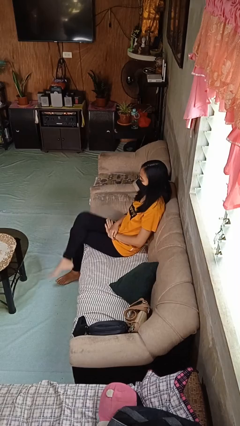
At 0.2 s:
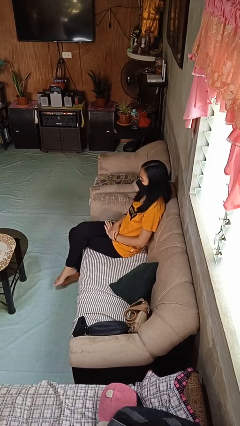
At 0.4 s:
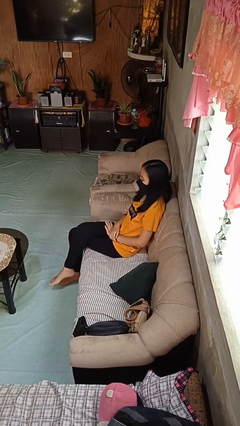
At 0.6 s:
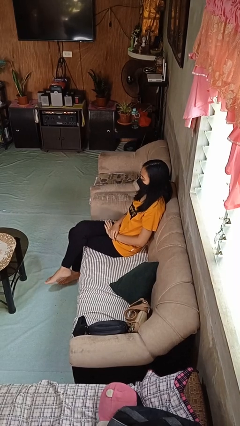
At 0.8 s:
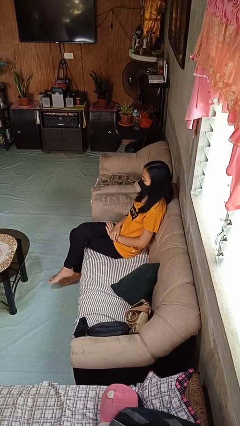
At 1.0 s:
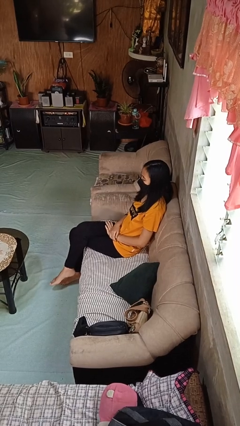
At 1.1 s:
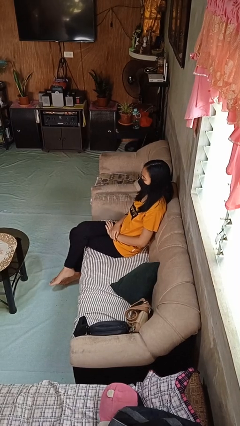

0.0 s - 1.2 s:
person crosses legs

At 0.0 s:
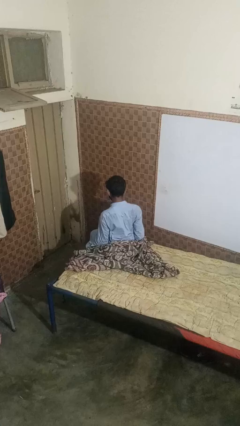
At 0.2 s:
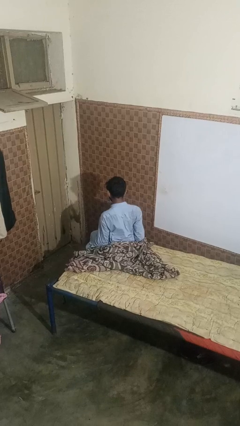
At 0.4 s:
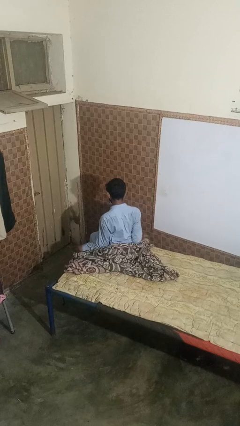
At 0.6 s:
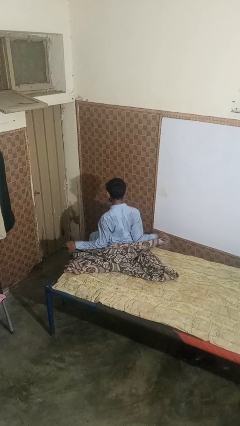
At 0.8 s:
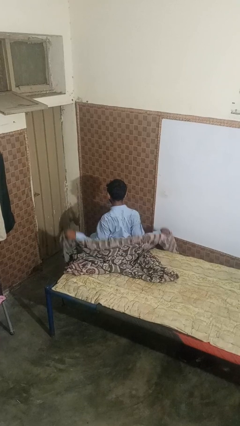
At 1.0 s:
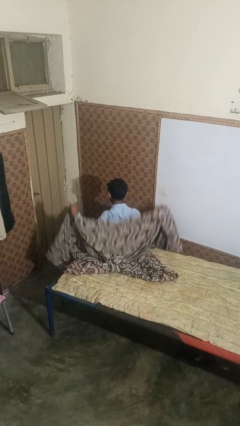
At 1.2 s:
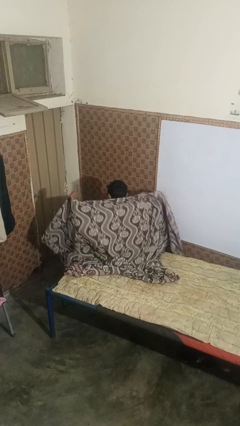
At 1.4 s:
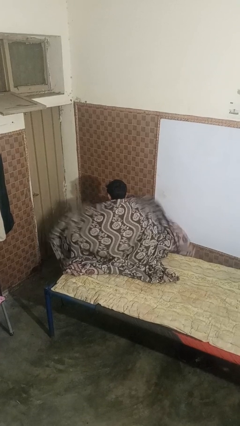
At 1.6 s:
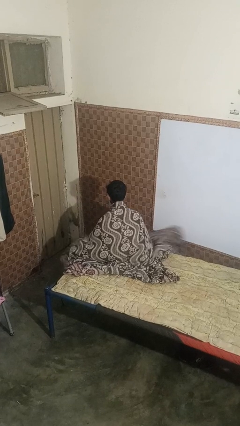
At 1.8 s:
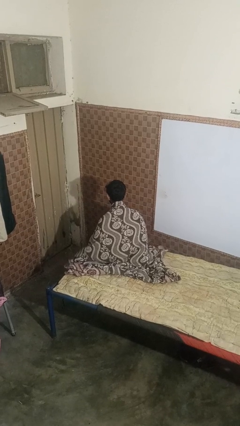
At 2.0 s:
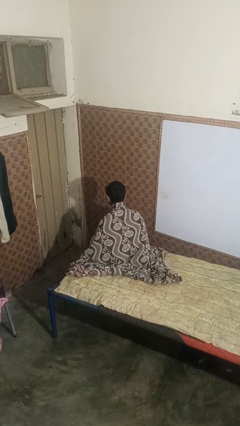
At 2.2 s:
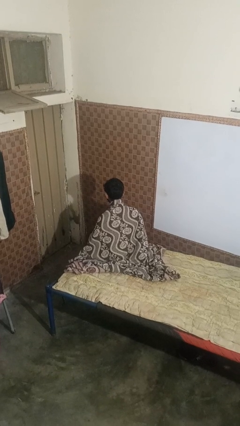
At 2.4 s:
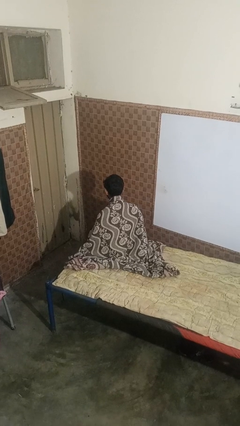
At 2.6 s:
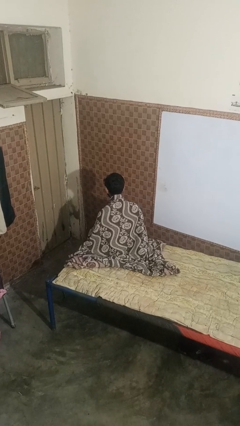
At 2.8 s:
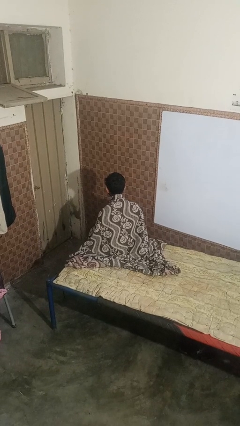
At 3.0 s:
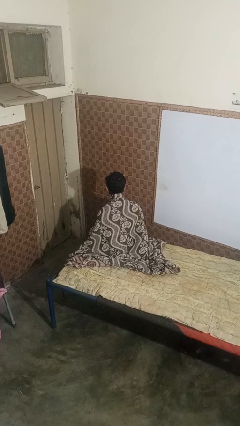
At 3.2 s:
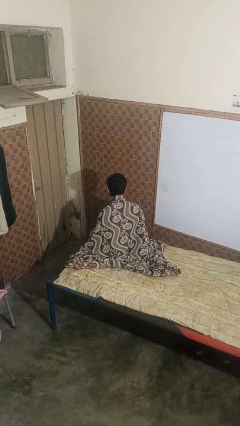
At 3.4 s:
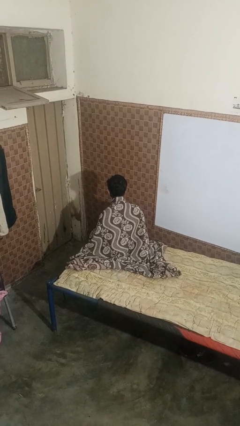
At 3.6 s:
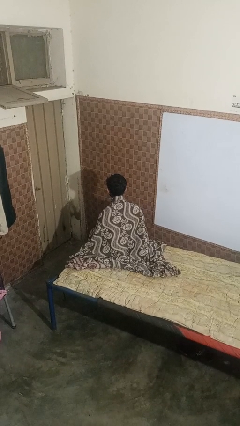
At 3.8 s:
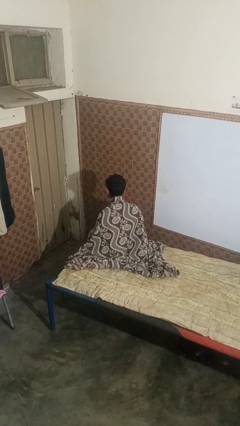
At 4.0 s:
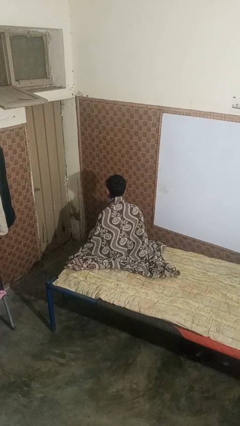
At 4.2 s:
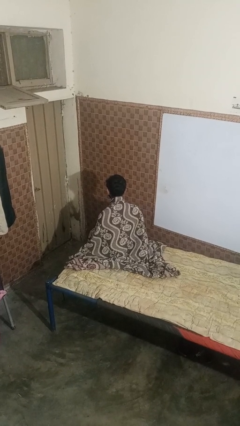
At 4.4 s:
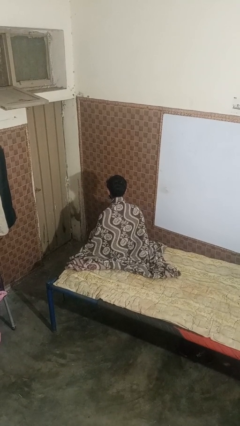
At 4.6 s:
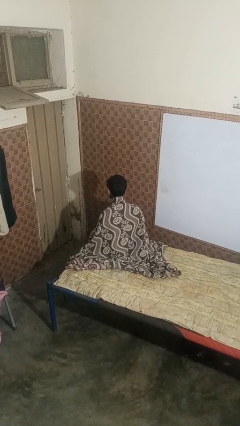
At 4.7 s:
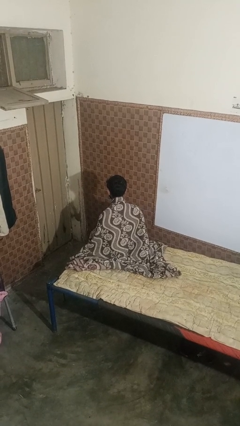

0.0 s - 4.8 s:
person covers with bedsheets

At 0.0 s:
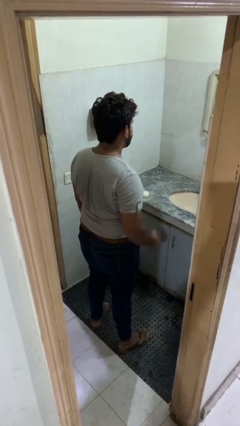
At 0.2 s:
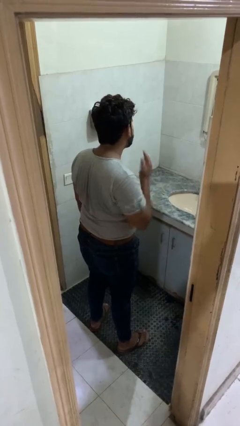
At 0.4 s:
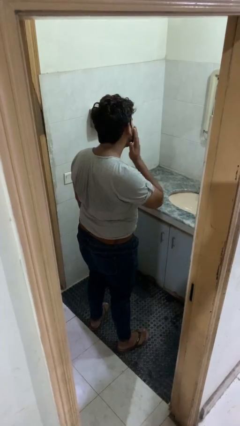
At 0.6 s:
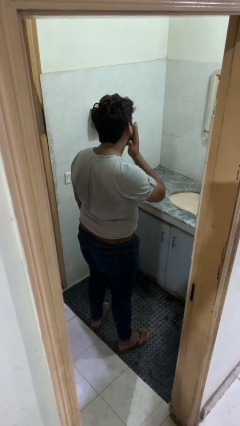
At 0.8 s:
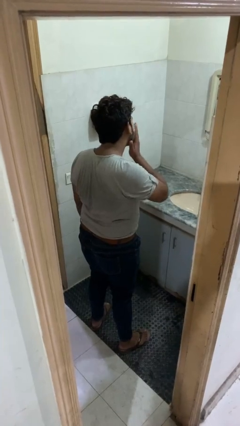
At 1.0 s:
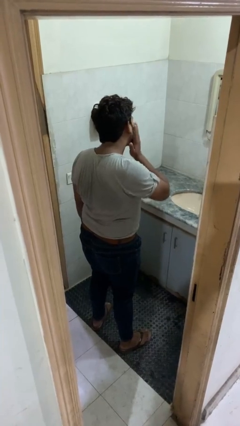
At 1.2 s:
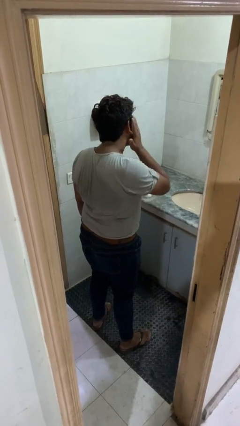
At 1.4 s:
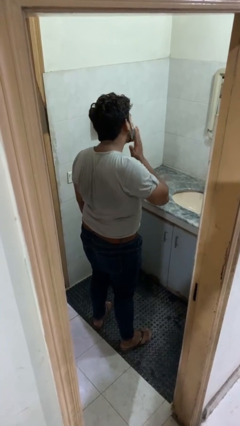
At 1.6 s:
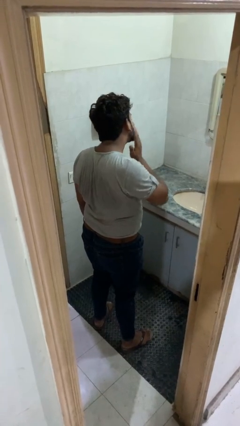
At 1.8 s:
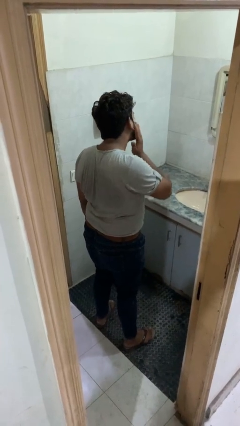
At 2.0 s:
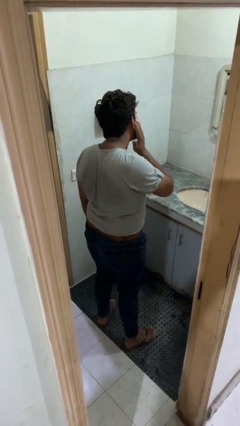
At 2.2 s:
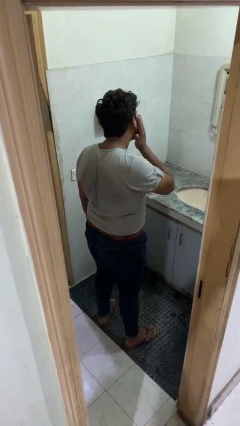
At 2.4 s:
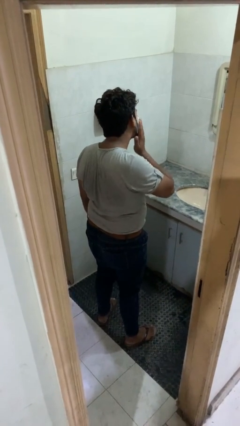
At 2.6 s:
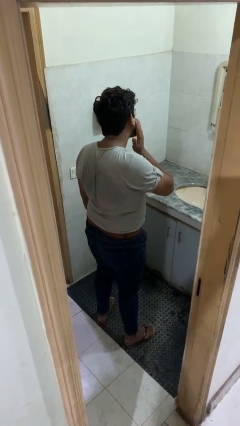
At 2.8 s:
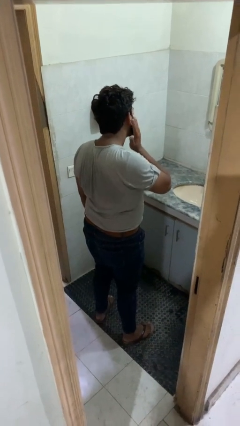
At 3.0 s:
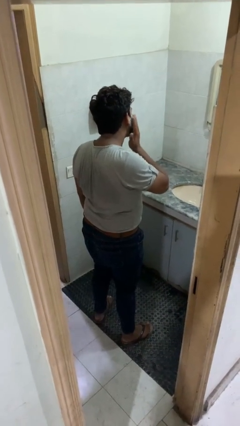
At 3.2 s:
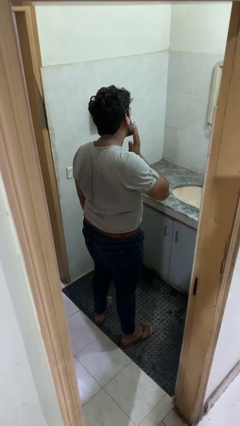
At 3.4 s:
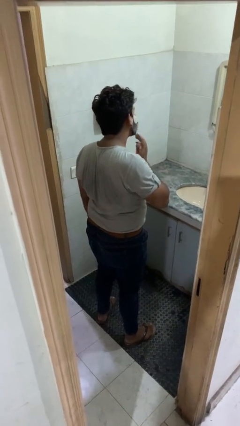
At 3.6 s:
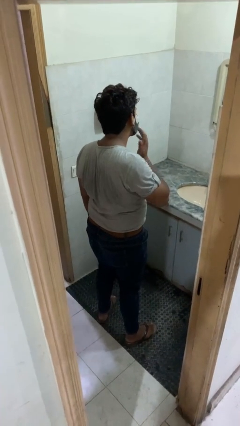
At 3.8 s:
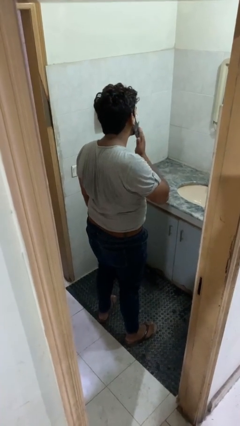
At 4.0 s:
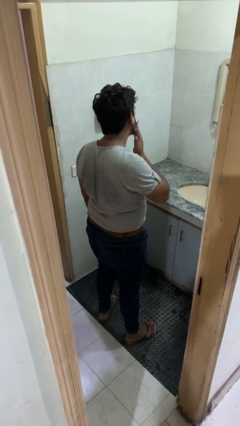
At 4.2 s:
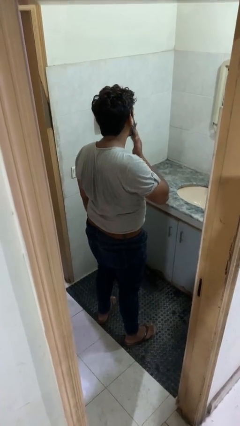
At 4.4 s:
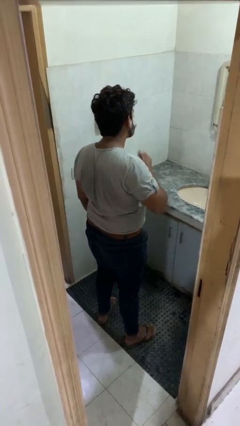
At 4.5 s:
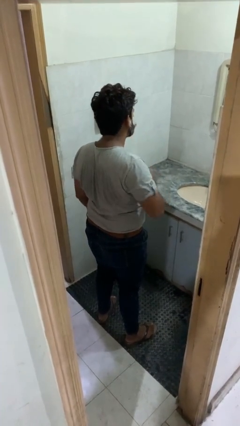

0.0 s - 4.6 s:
person applies shaving cream

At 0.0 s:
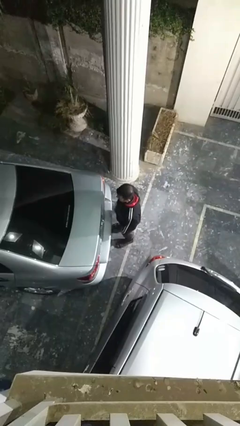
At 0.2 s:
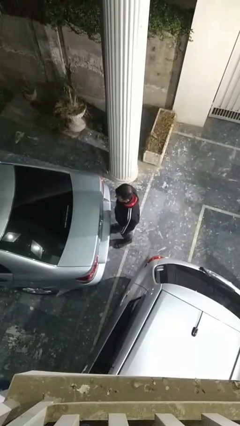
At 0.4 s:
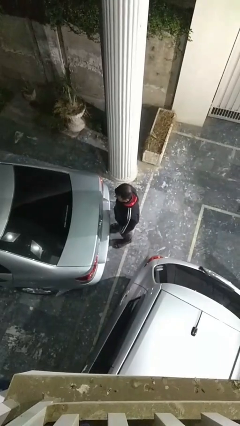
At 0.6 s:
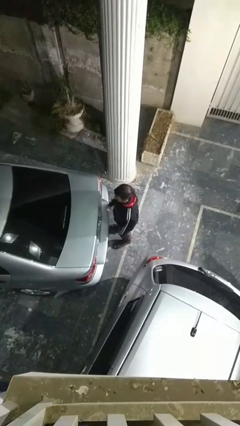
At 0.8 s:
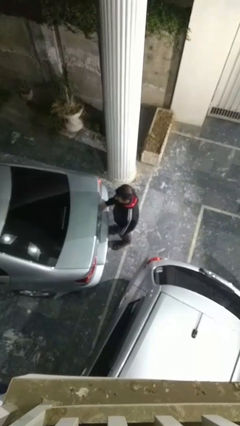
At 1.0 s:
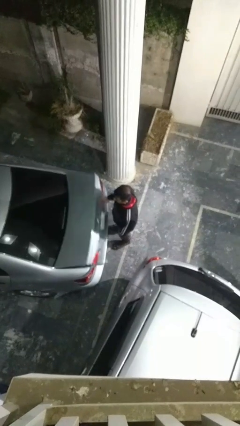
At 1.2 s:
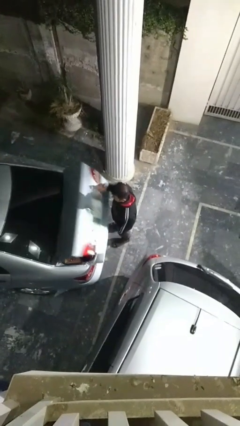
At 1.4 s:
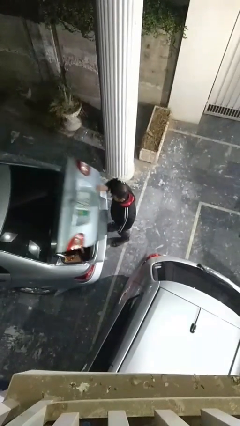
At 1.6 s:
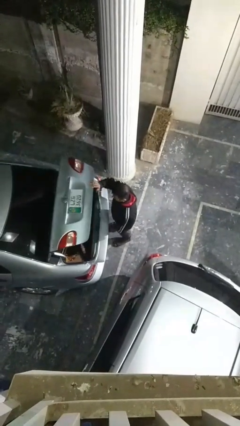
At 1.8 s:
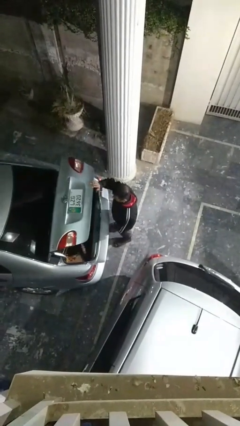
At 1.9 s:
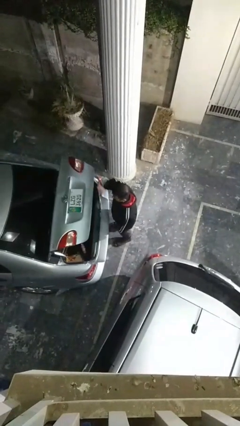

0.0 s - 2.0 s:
person opens car trunk

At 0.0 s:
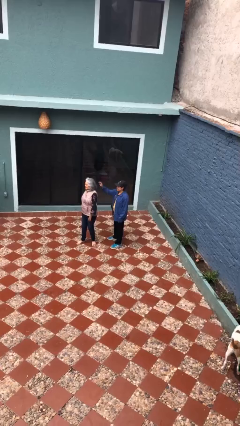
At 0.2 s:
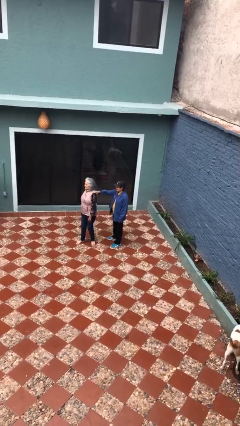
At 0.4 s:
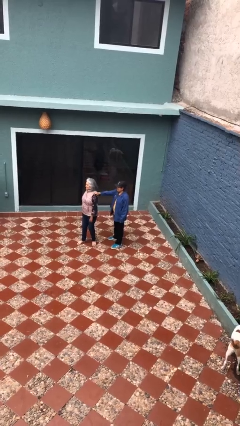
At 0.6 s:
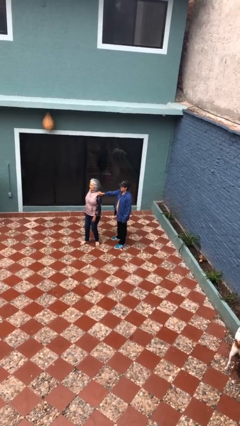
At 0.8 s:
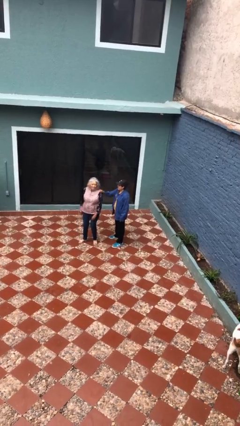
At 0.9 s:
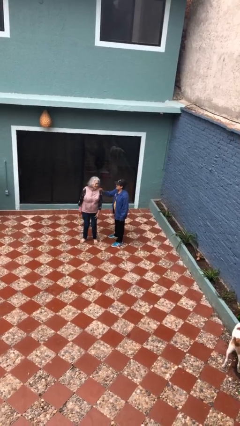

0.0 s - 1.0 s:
person grabs person by shoulder

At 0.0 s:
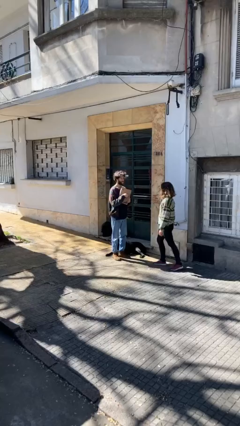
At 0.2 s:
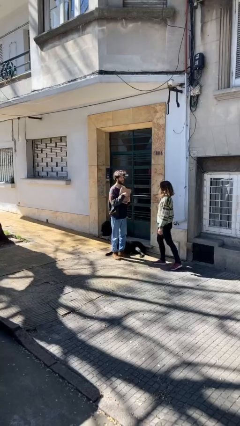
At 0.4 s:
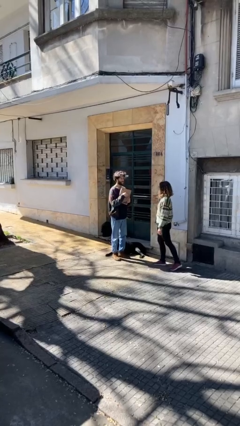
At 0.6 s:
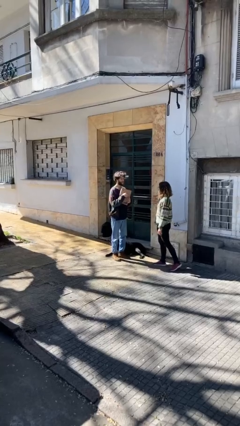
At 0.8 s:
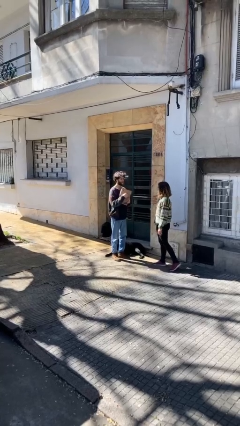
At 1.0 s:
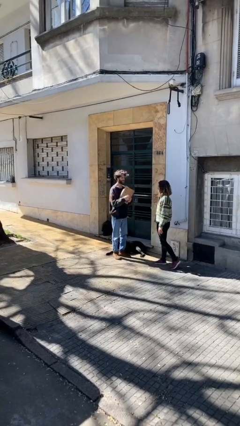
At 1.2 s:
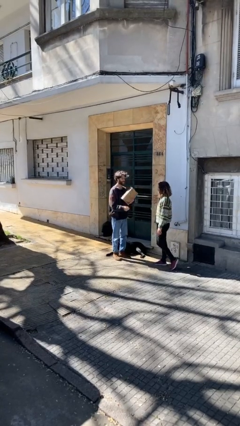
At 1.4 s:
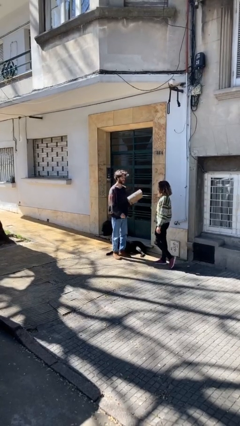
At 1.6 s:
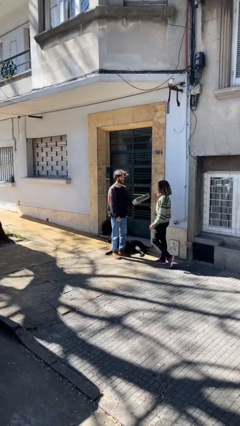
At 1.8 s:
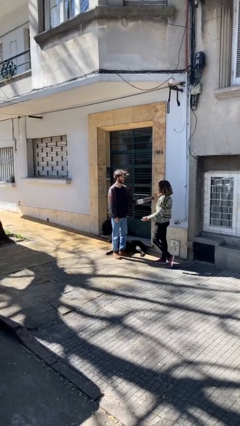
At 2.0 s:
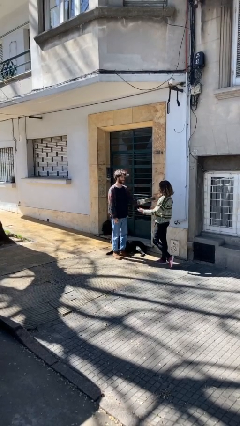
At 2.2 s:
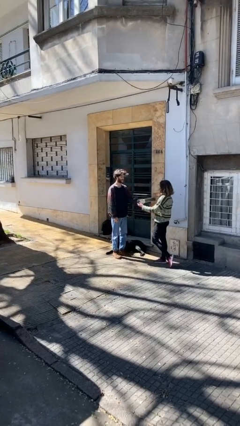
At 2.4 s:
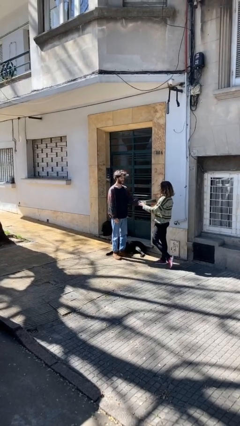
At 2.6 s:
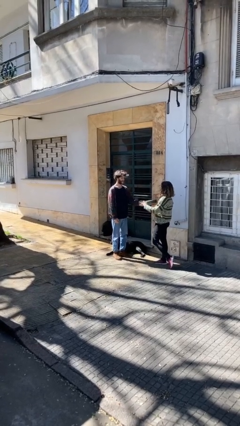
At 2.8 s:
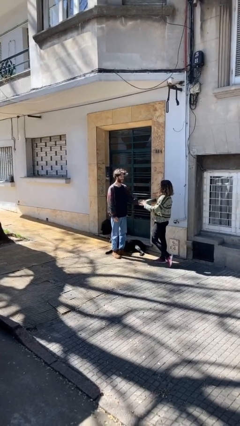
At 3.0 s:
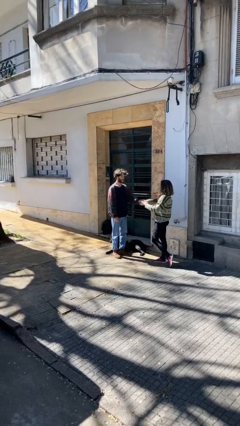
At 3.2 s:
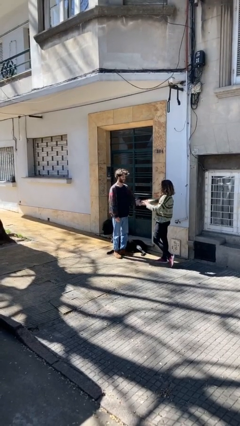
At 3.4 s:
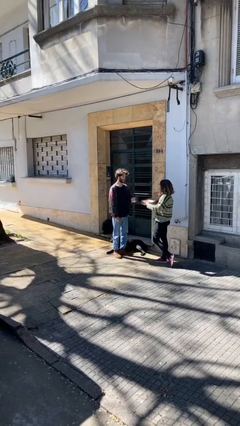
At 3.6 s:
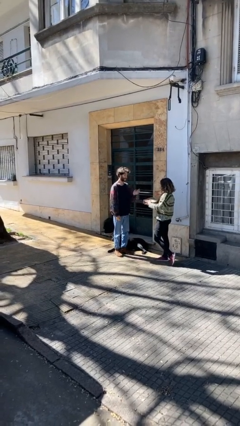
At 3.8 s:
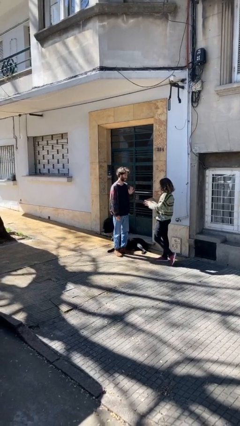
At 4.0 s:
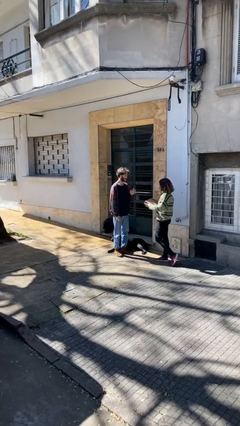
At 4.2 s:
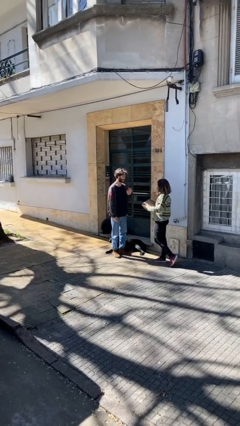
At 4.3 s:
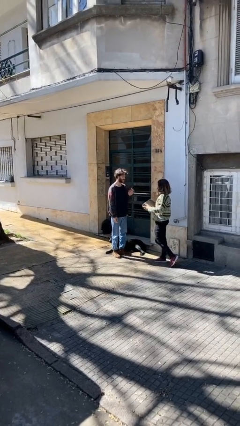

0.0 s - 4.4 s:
person transfers object to person
